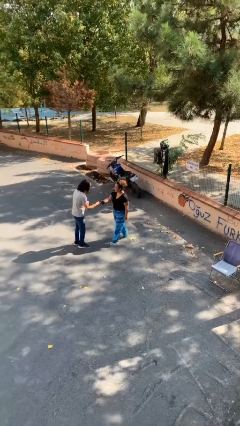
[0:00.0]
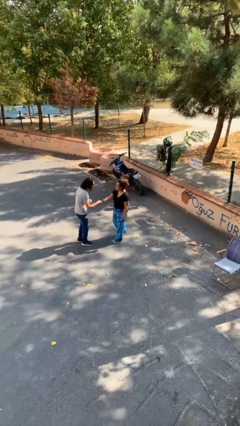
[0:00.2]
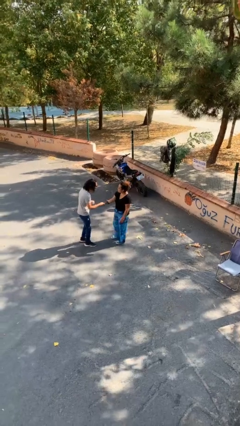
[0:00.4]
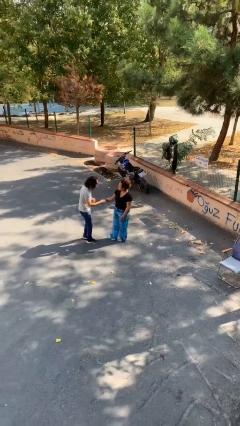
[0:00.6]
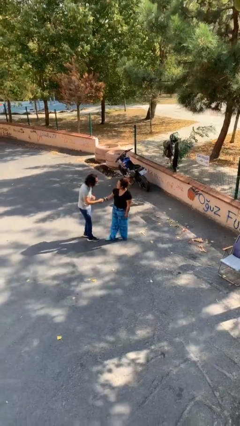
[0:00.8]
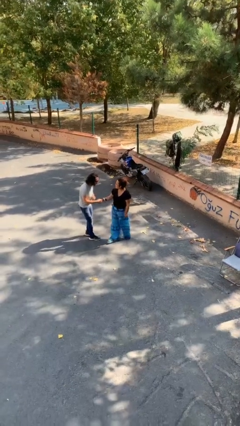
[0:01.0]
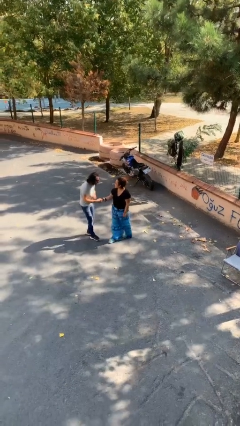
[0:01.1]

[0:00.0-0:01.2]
person shakes hand

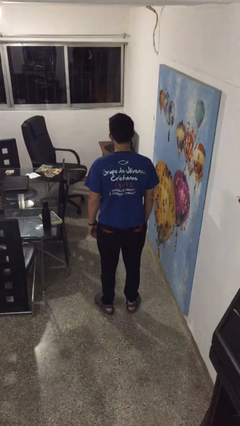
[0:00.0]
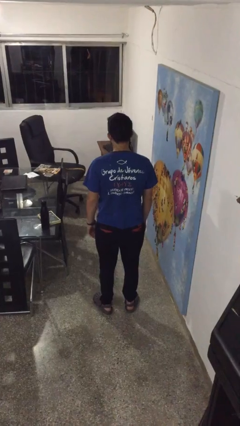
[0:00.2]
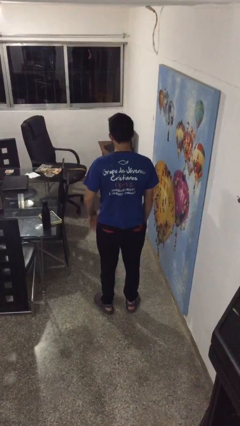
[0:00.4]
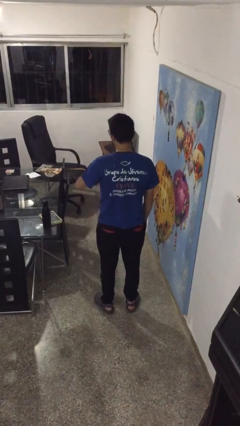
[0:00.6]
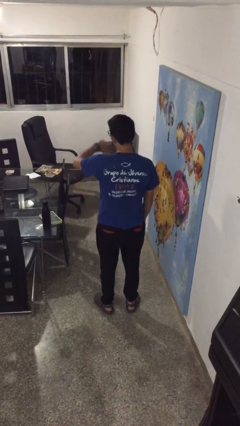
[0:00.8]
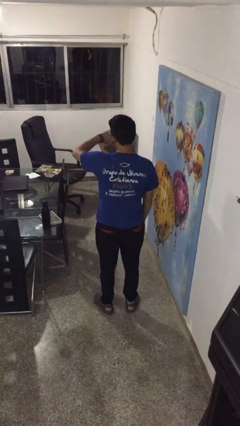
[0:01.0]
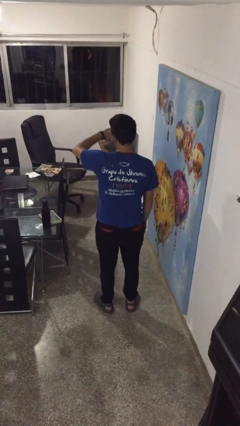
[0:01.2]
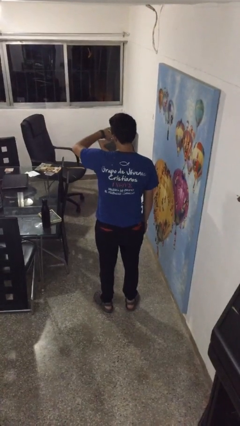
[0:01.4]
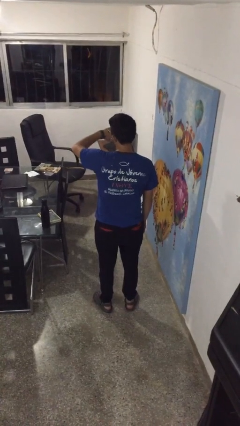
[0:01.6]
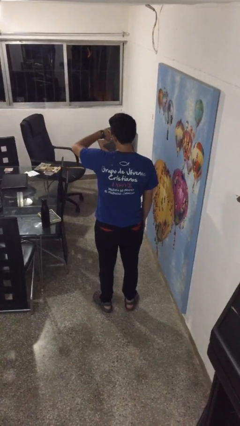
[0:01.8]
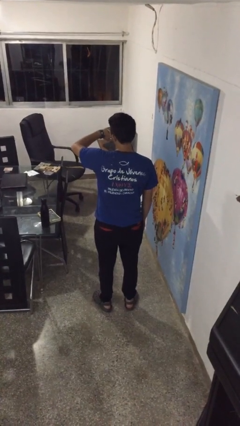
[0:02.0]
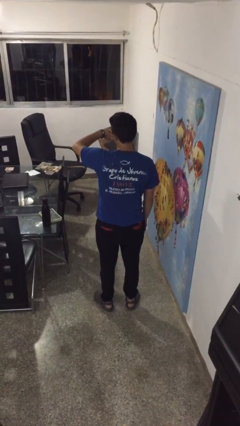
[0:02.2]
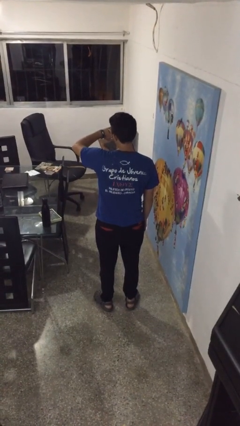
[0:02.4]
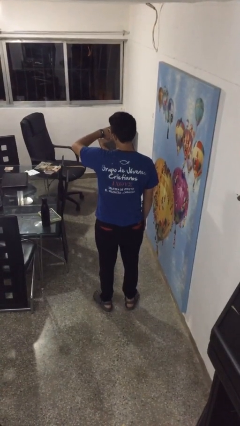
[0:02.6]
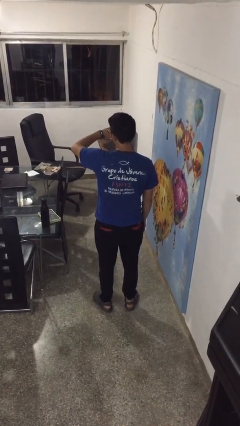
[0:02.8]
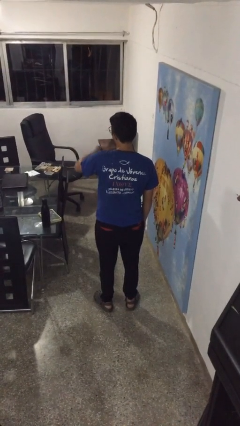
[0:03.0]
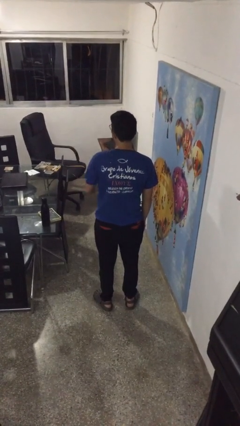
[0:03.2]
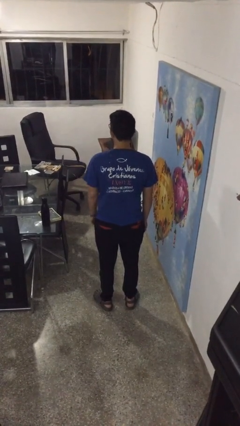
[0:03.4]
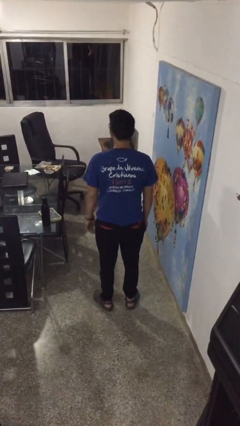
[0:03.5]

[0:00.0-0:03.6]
person looks at wristwatch

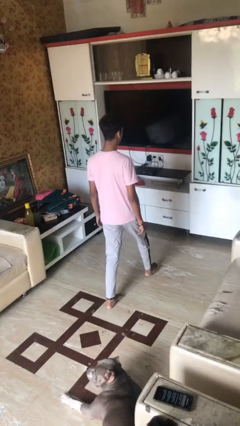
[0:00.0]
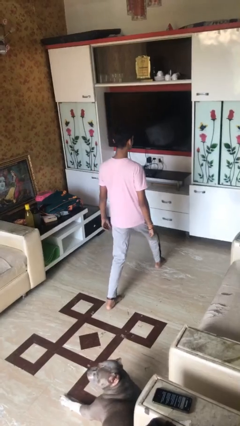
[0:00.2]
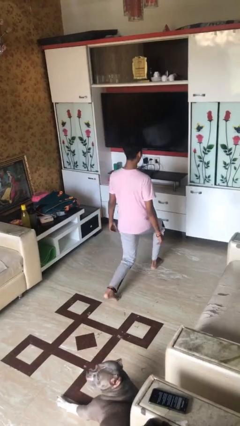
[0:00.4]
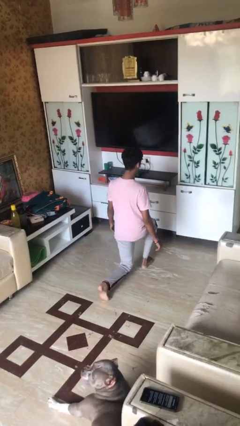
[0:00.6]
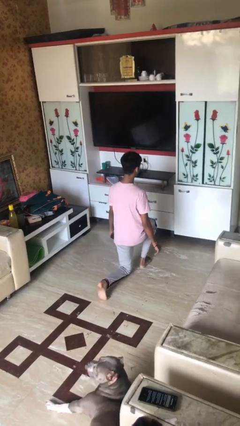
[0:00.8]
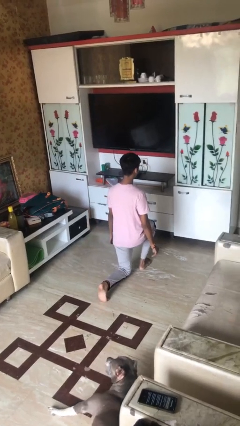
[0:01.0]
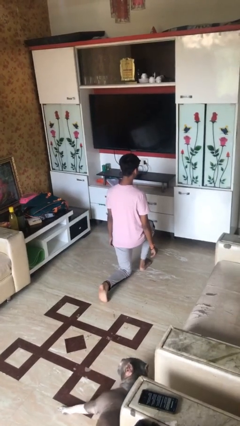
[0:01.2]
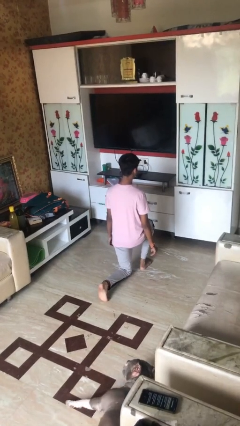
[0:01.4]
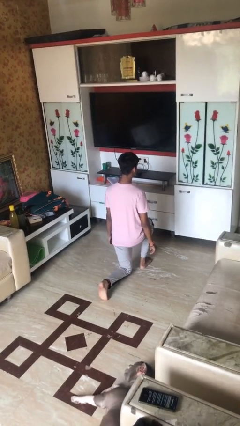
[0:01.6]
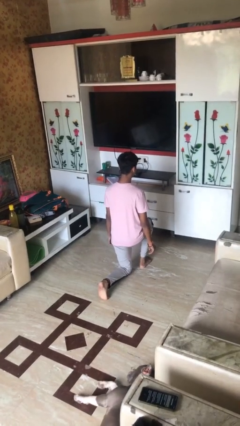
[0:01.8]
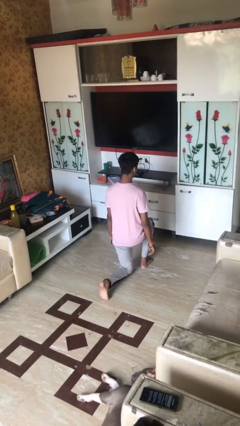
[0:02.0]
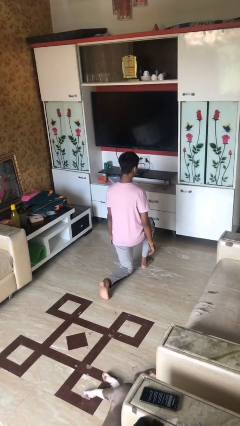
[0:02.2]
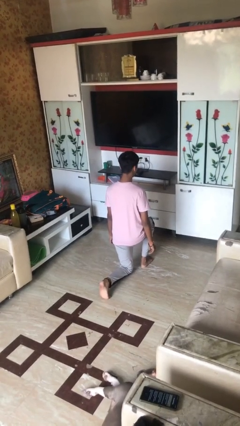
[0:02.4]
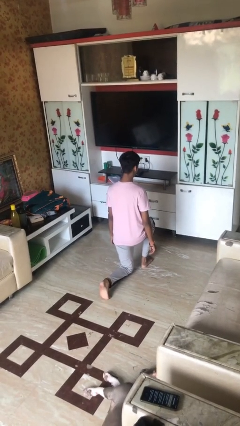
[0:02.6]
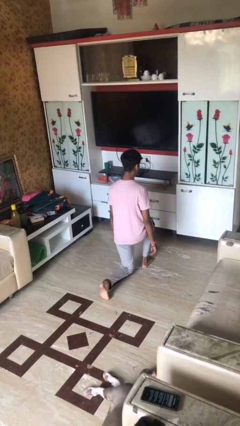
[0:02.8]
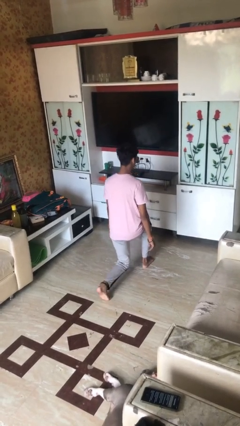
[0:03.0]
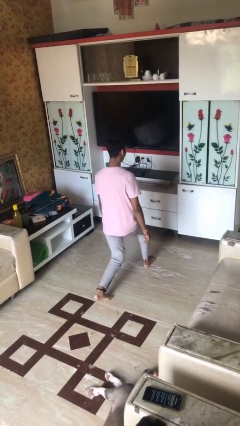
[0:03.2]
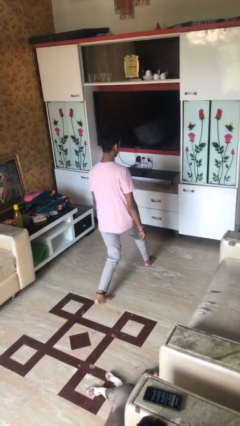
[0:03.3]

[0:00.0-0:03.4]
person exercises with lunges

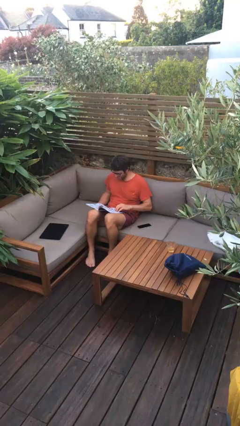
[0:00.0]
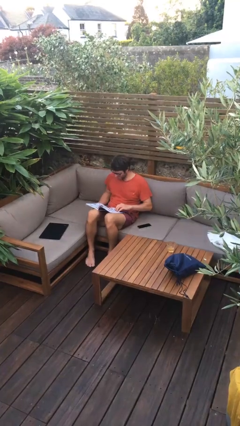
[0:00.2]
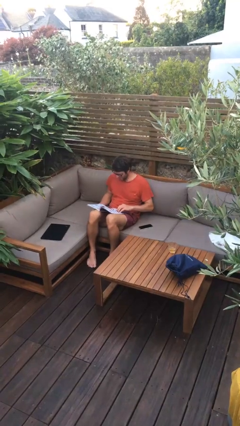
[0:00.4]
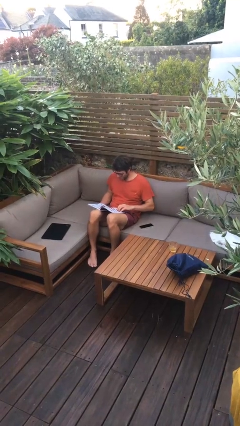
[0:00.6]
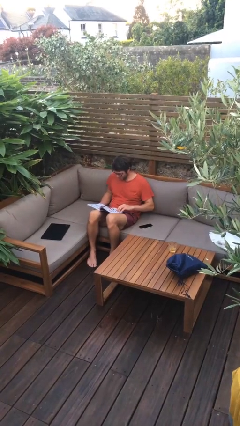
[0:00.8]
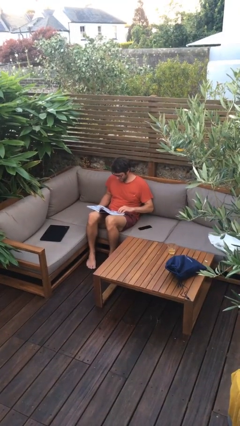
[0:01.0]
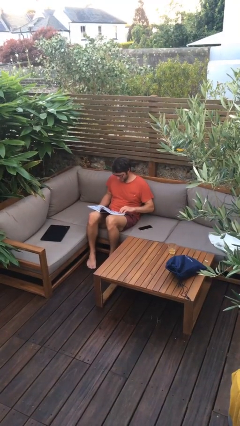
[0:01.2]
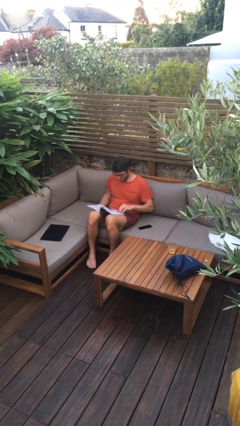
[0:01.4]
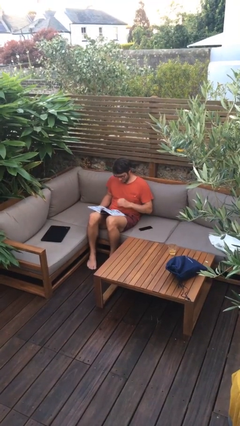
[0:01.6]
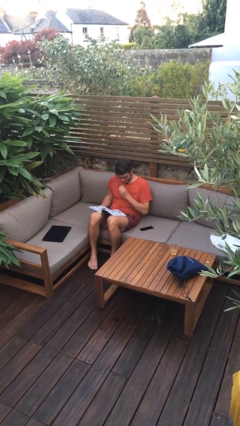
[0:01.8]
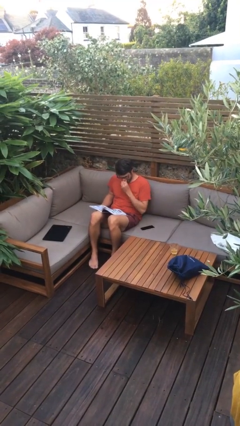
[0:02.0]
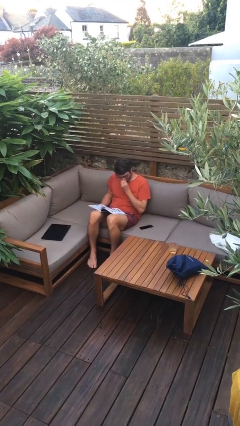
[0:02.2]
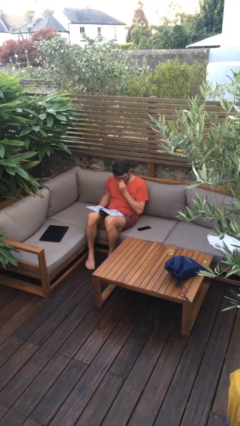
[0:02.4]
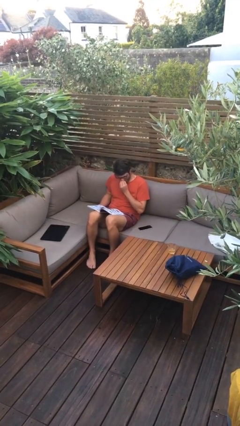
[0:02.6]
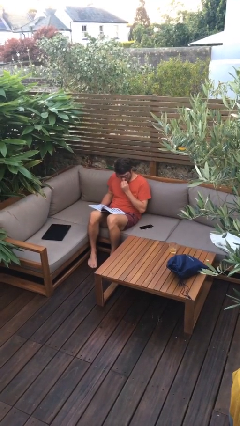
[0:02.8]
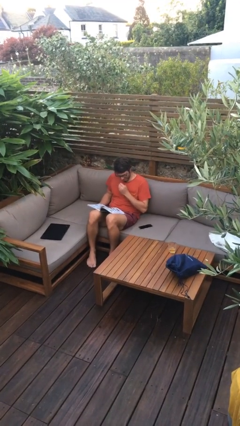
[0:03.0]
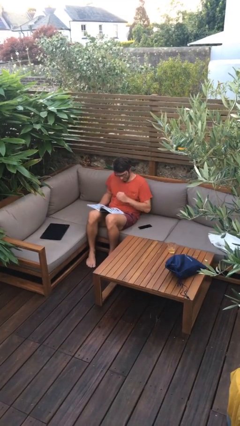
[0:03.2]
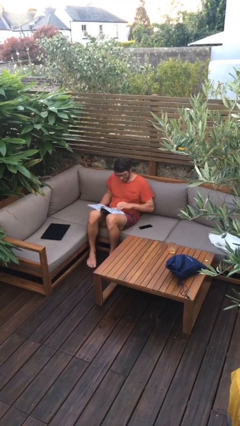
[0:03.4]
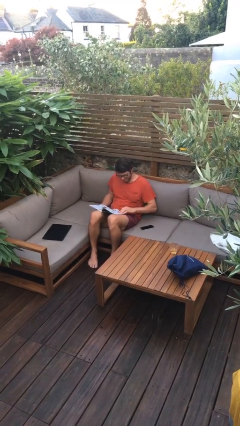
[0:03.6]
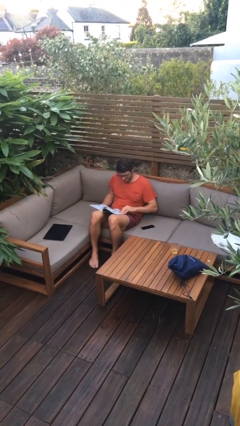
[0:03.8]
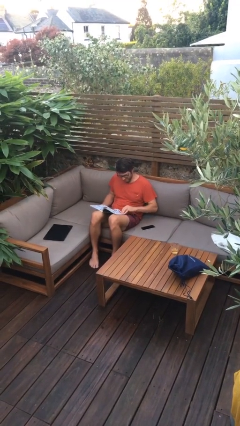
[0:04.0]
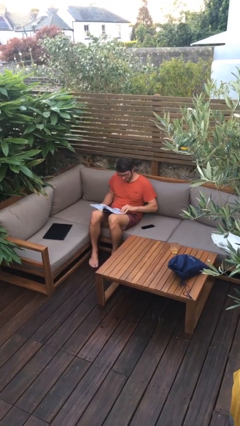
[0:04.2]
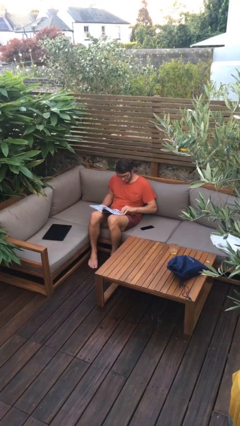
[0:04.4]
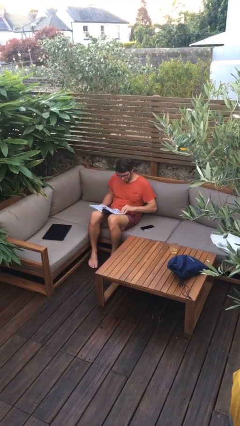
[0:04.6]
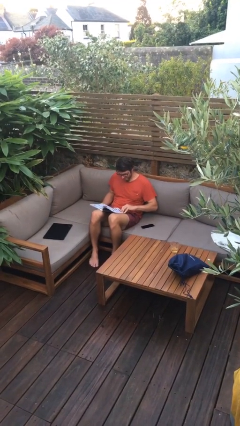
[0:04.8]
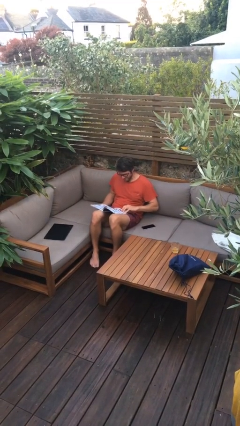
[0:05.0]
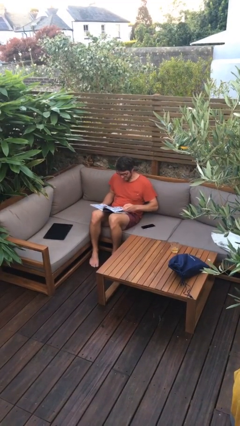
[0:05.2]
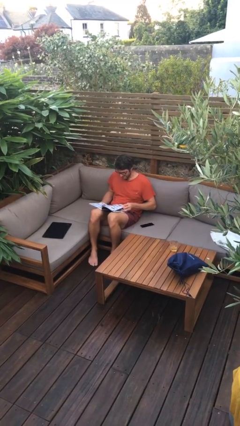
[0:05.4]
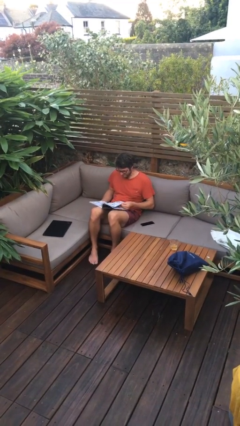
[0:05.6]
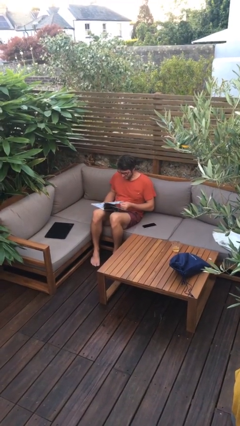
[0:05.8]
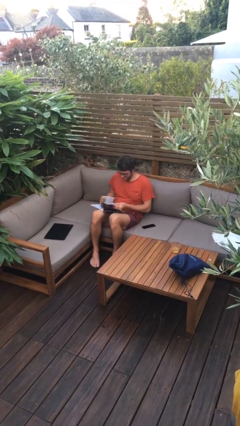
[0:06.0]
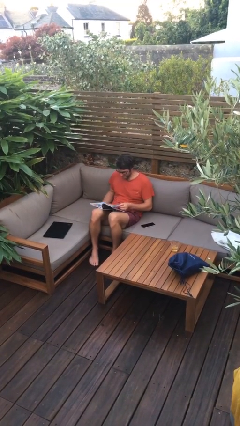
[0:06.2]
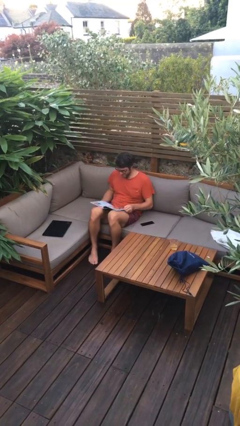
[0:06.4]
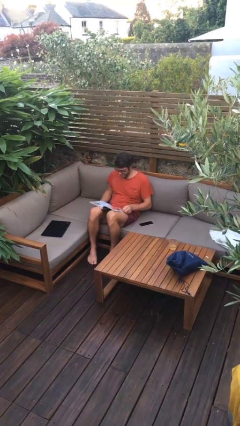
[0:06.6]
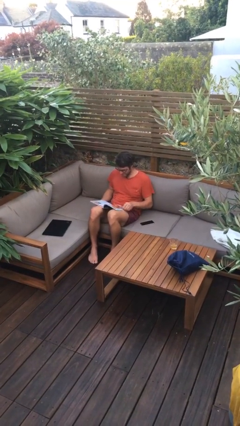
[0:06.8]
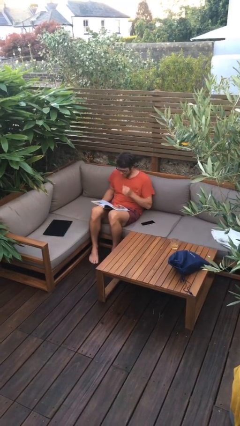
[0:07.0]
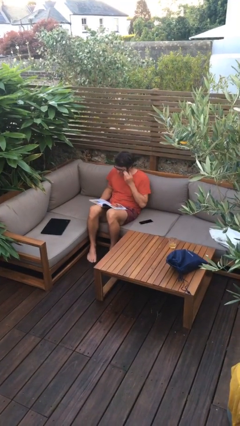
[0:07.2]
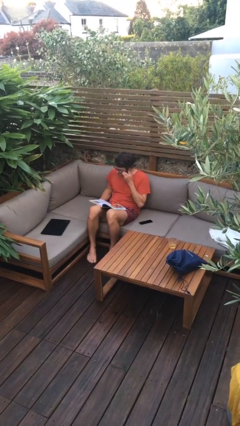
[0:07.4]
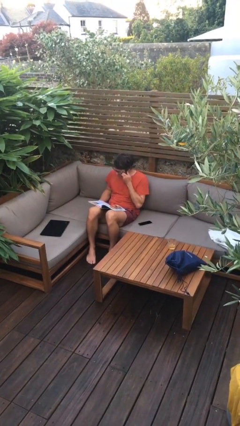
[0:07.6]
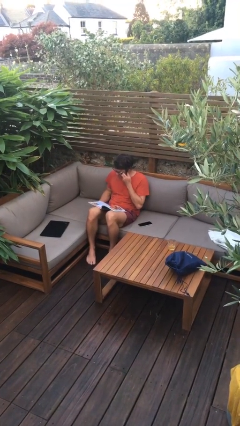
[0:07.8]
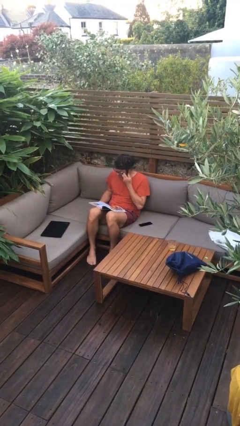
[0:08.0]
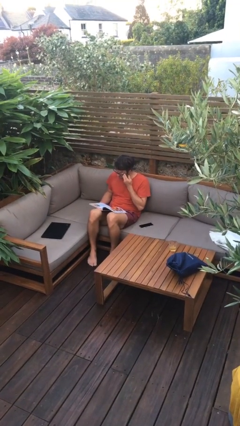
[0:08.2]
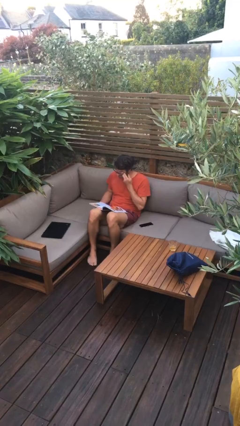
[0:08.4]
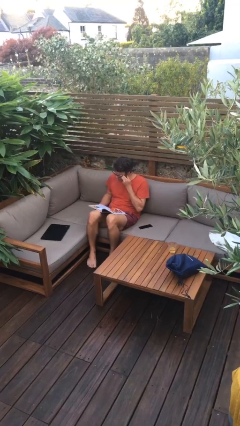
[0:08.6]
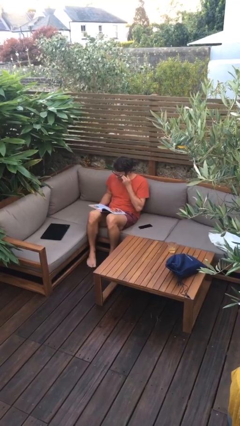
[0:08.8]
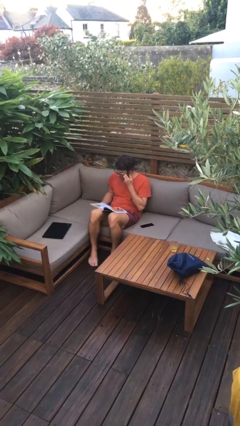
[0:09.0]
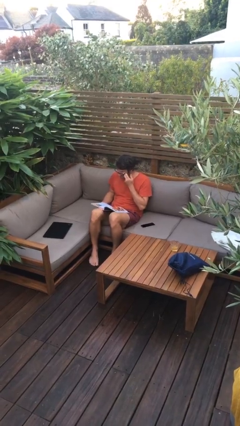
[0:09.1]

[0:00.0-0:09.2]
person reads document

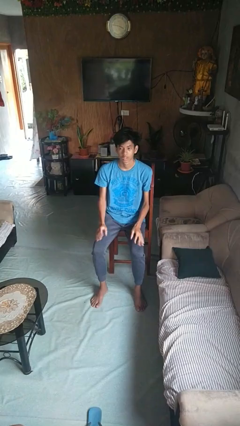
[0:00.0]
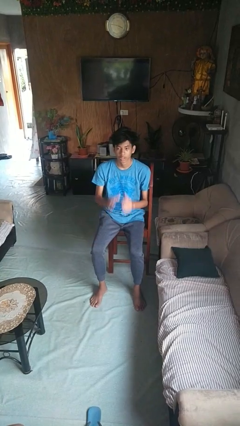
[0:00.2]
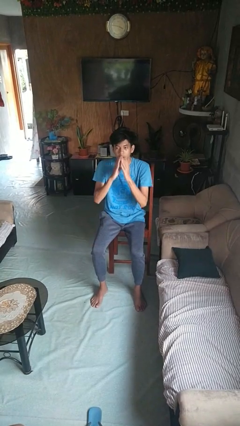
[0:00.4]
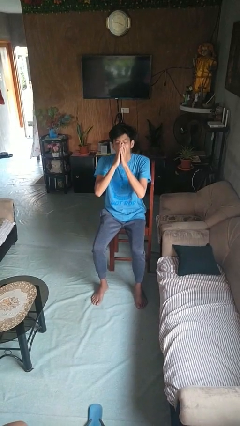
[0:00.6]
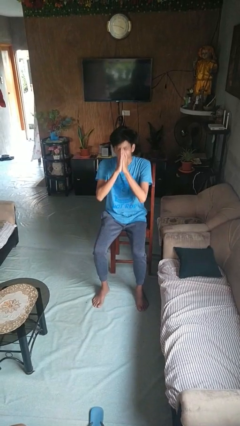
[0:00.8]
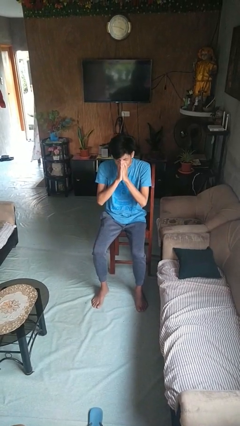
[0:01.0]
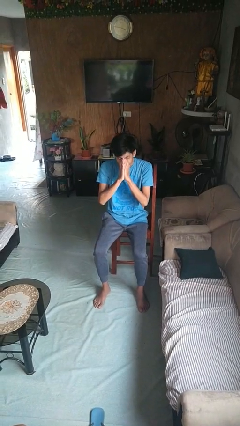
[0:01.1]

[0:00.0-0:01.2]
person sneezes into hand
